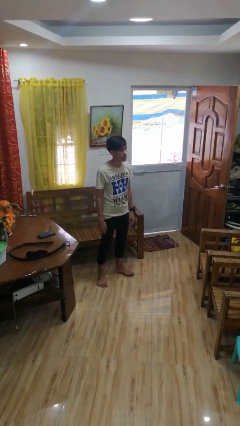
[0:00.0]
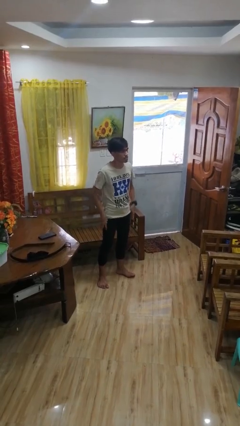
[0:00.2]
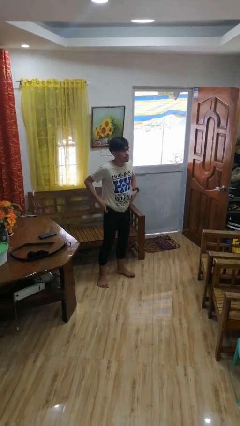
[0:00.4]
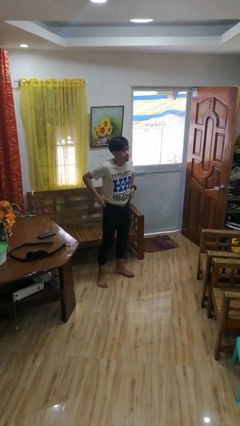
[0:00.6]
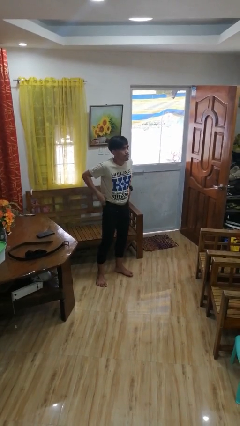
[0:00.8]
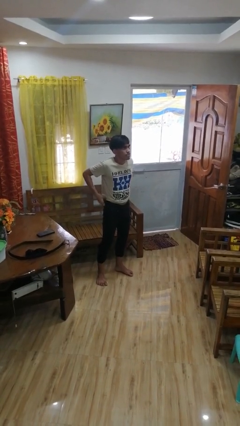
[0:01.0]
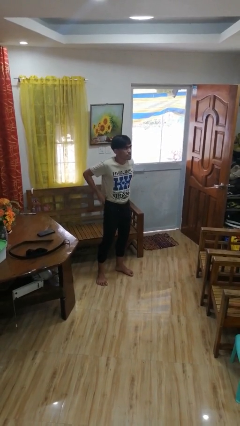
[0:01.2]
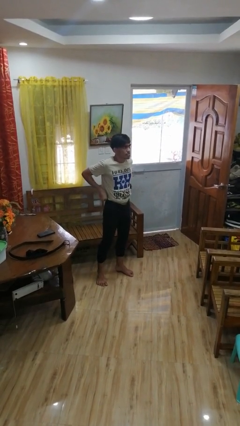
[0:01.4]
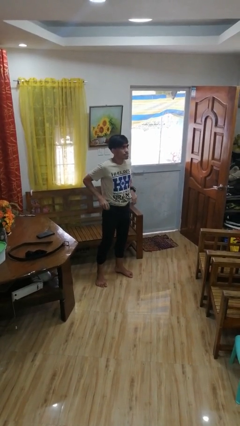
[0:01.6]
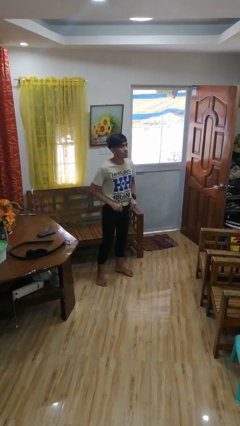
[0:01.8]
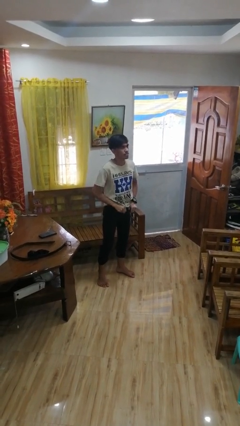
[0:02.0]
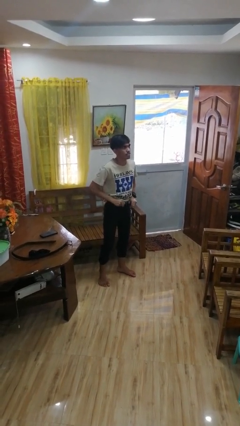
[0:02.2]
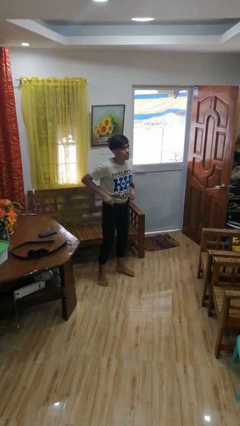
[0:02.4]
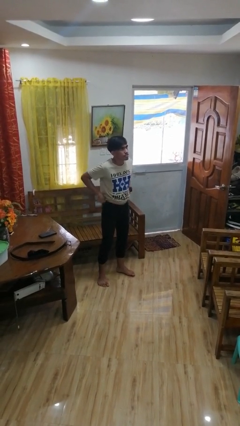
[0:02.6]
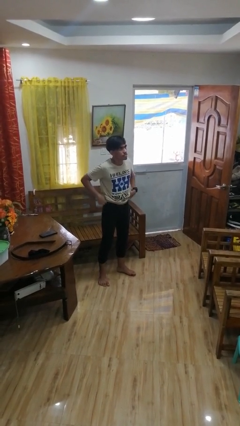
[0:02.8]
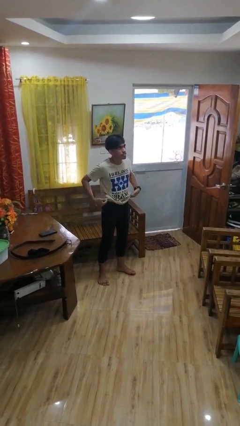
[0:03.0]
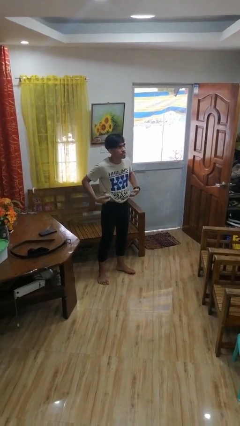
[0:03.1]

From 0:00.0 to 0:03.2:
person hikes up pants

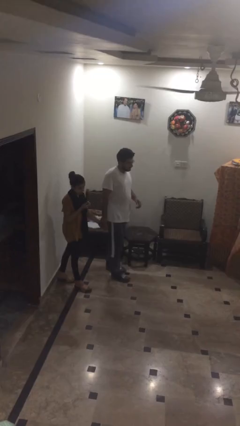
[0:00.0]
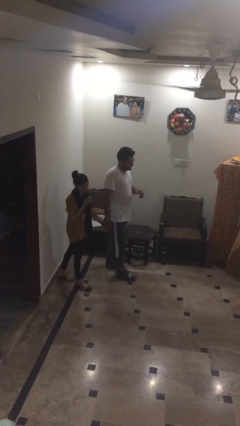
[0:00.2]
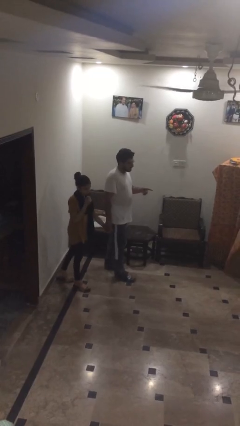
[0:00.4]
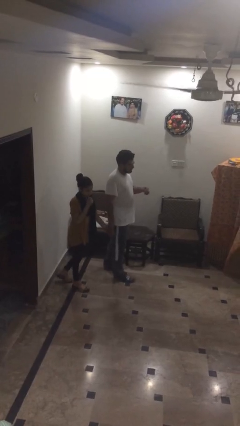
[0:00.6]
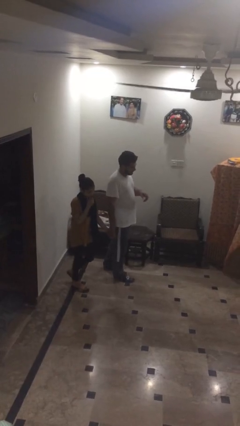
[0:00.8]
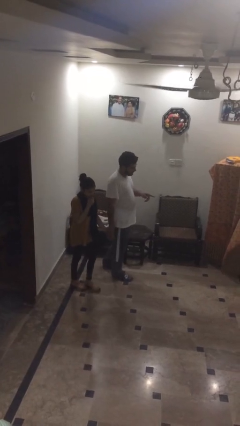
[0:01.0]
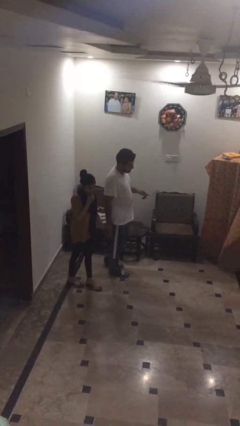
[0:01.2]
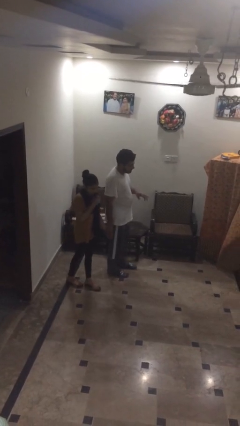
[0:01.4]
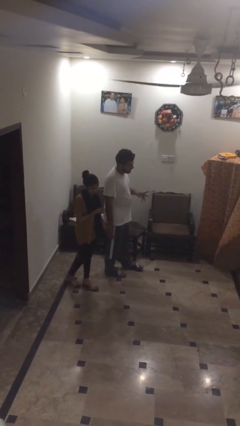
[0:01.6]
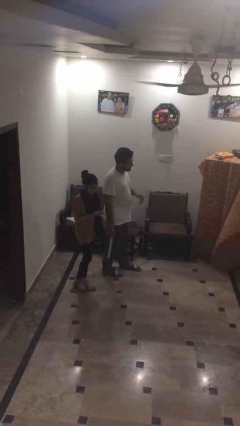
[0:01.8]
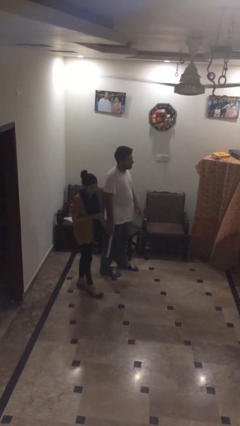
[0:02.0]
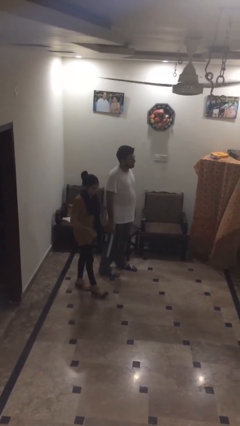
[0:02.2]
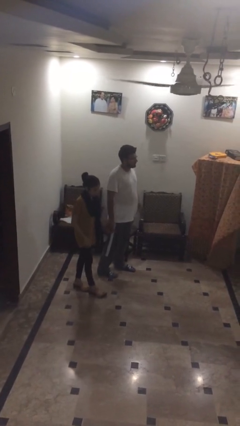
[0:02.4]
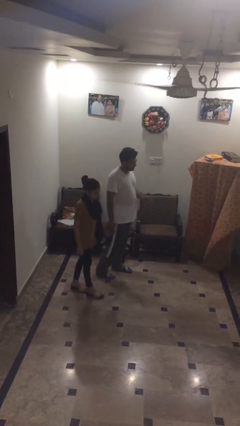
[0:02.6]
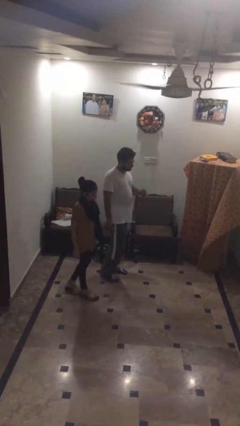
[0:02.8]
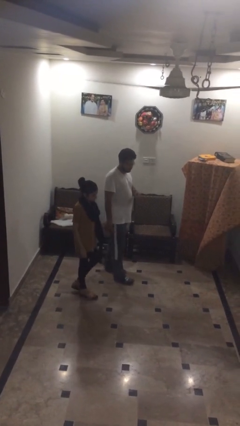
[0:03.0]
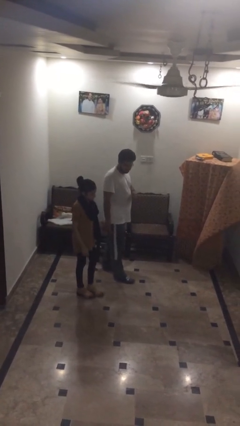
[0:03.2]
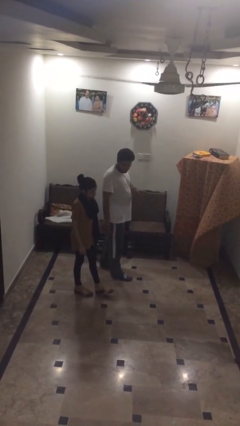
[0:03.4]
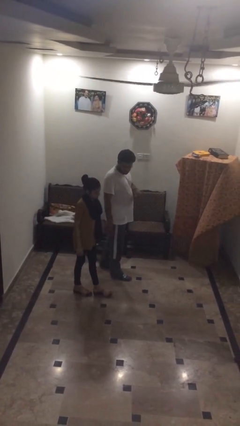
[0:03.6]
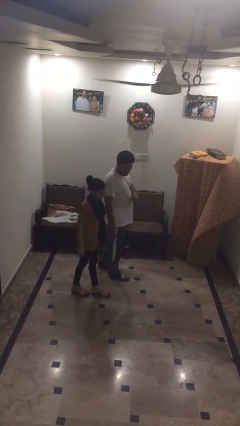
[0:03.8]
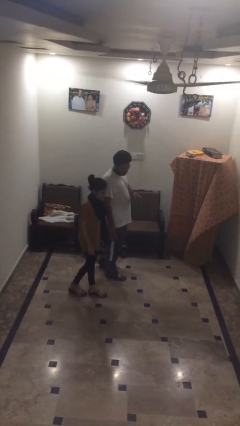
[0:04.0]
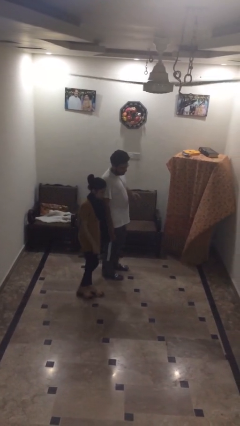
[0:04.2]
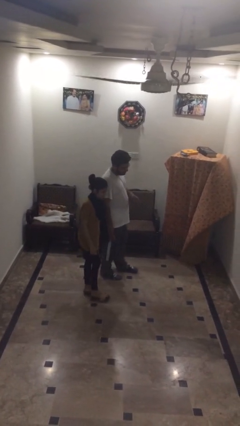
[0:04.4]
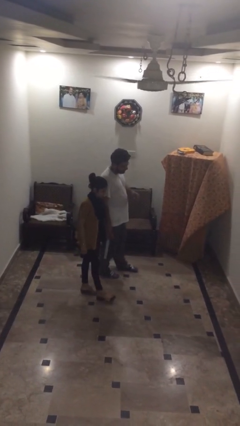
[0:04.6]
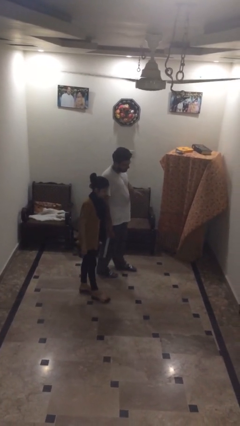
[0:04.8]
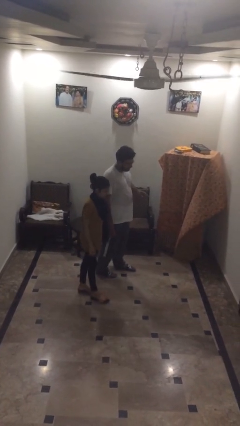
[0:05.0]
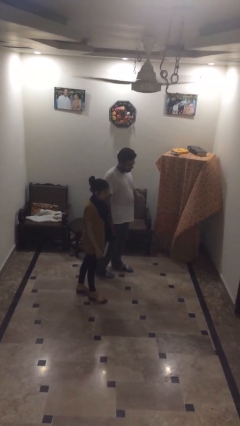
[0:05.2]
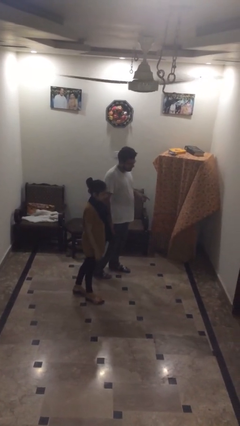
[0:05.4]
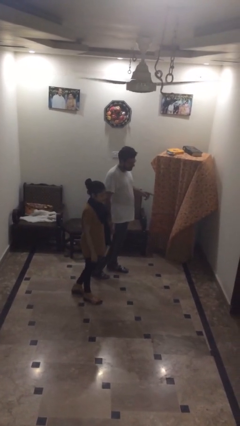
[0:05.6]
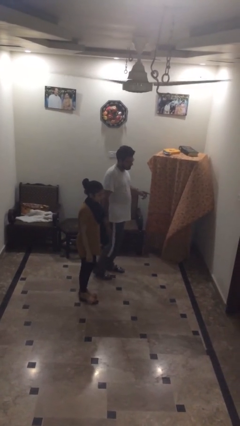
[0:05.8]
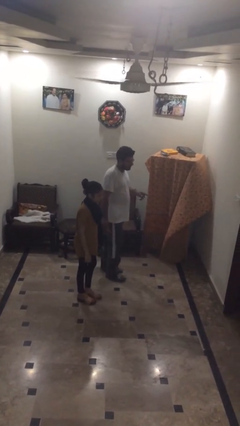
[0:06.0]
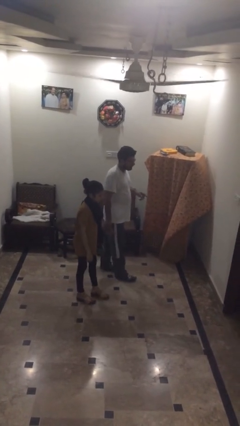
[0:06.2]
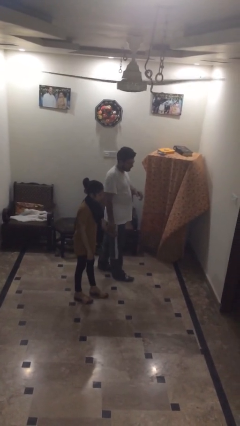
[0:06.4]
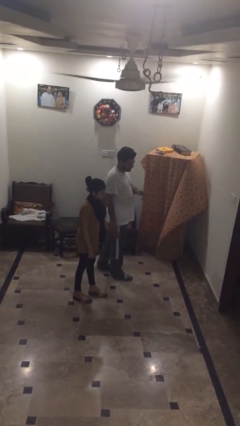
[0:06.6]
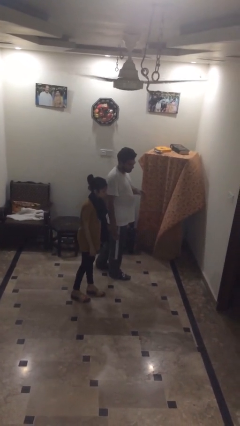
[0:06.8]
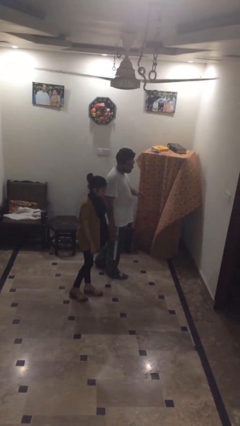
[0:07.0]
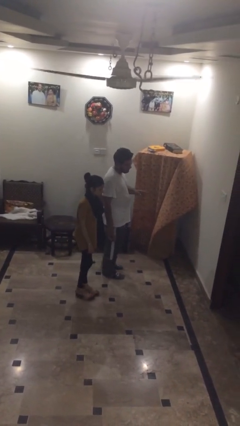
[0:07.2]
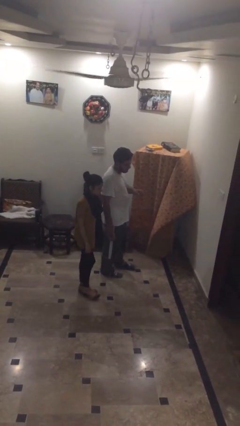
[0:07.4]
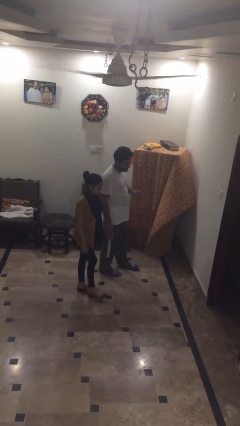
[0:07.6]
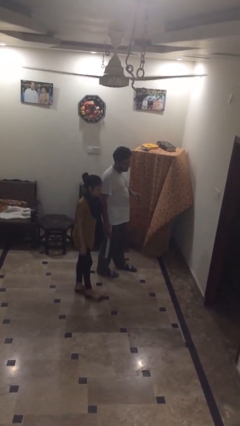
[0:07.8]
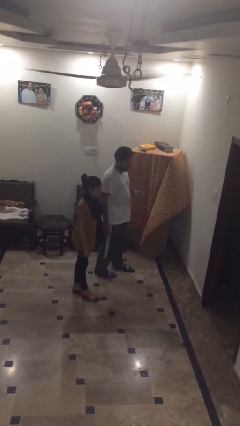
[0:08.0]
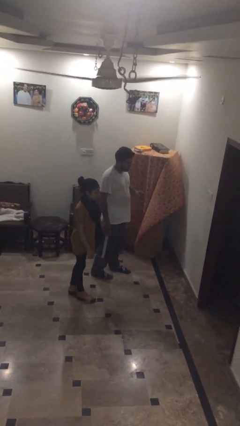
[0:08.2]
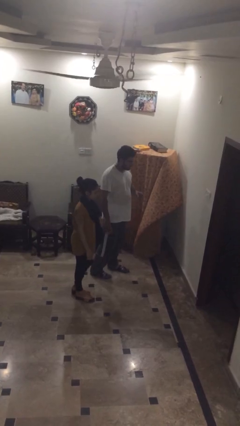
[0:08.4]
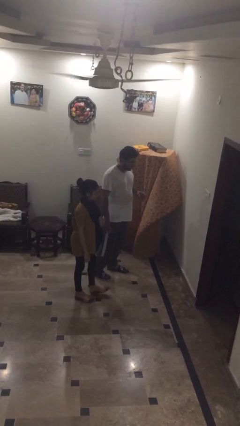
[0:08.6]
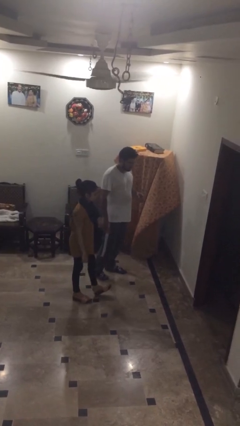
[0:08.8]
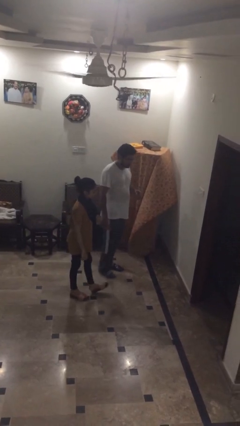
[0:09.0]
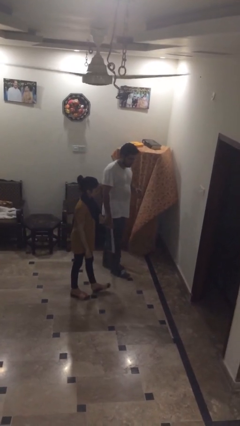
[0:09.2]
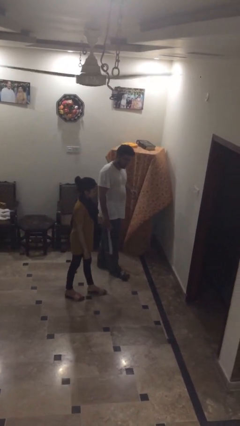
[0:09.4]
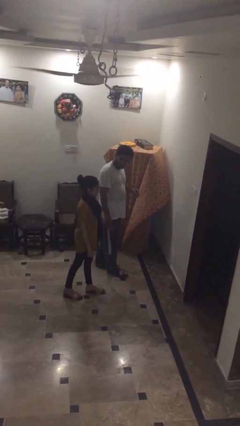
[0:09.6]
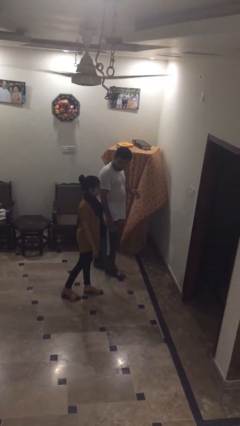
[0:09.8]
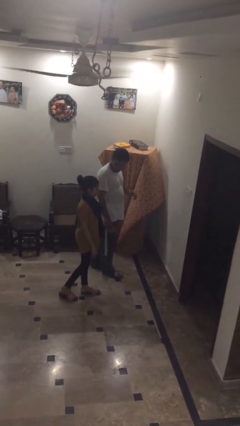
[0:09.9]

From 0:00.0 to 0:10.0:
person holds hand

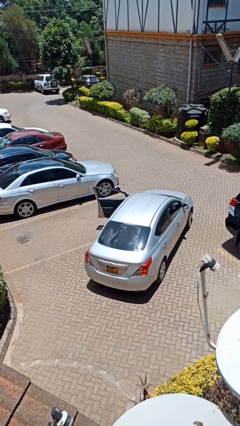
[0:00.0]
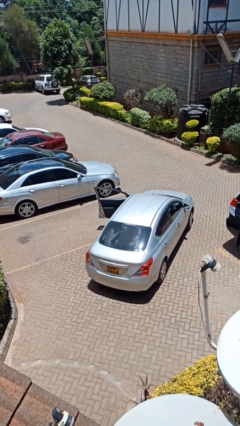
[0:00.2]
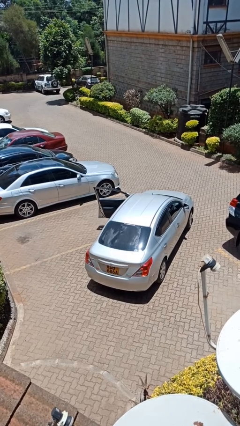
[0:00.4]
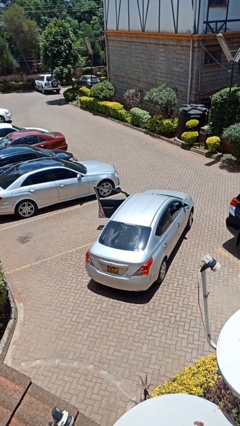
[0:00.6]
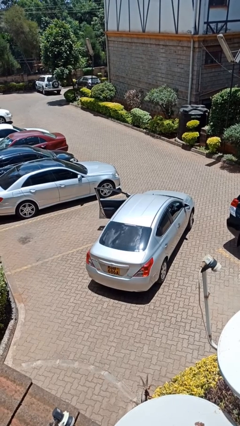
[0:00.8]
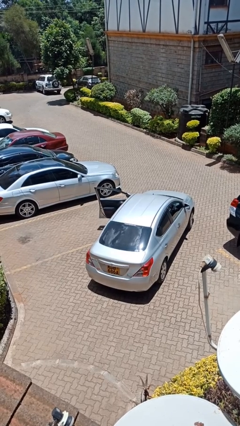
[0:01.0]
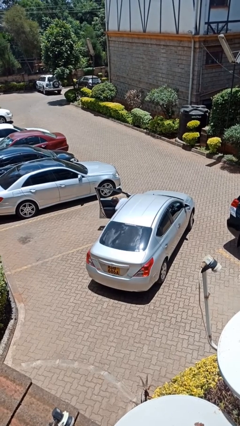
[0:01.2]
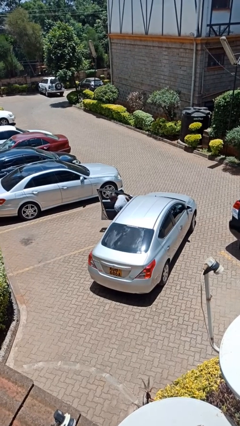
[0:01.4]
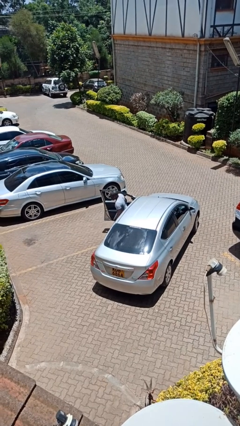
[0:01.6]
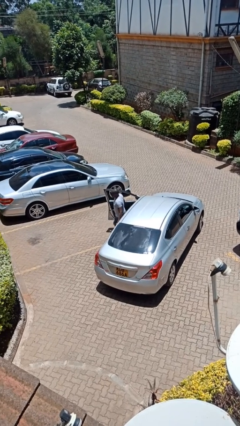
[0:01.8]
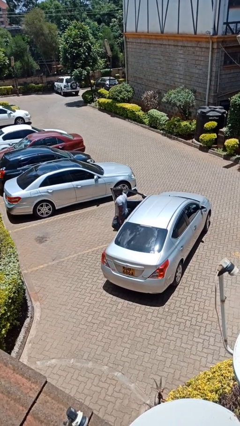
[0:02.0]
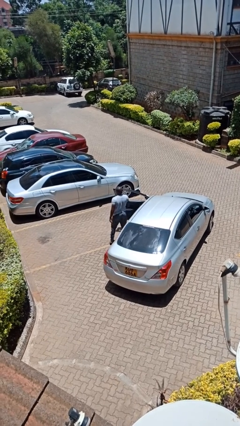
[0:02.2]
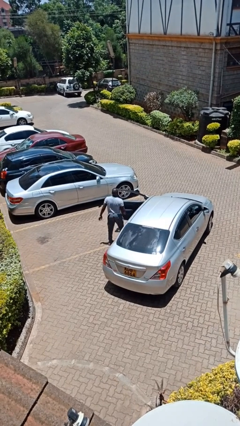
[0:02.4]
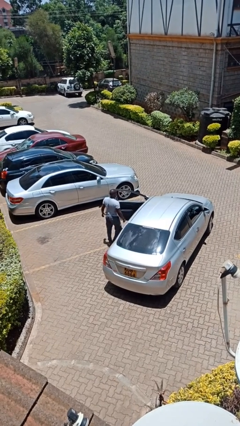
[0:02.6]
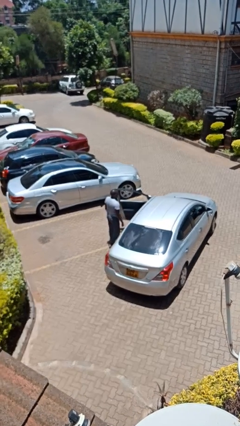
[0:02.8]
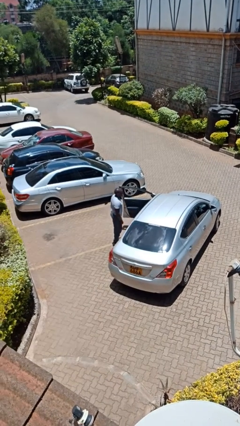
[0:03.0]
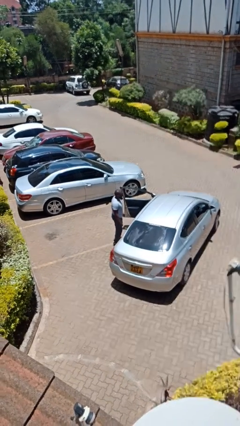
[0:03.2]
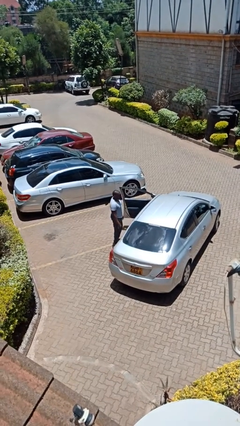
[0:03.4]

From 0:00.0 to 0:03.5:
person exits car

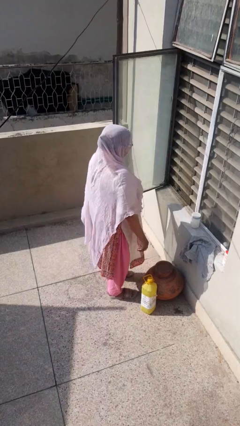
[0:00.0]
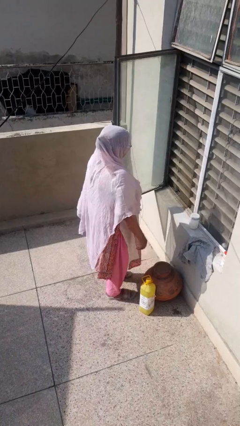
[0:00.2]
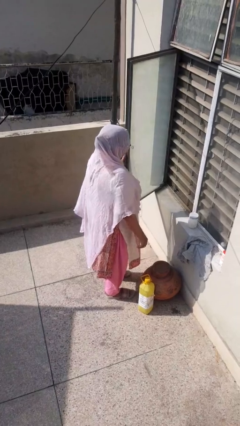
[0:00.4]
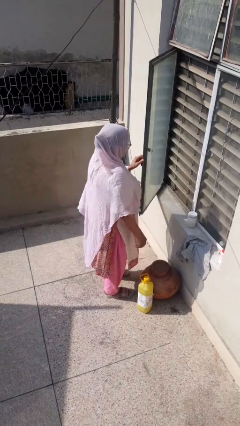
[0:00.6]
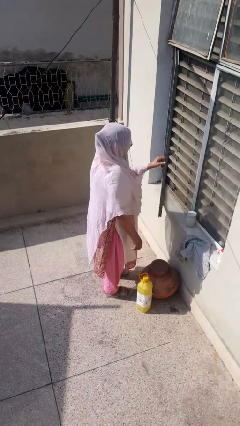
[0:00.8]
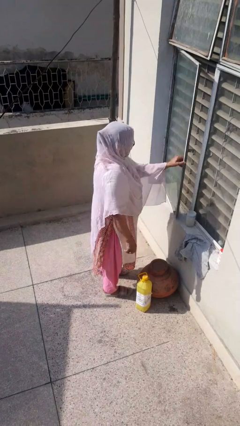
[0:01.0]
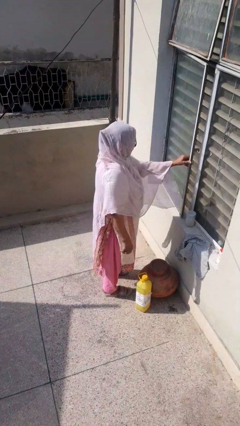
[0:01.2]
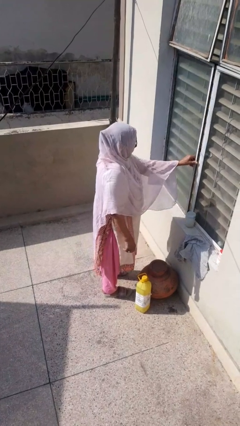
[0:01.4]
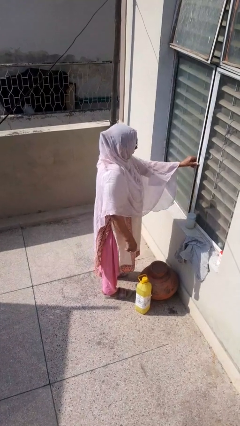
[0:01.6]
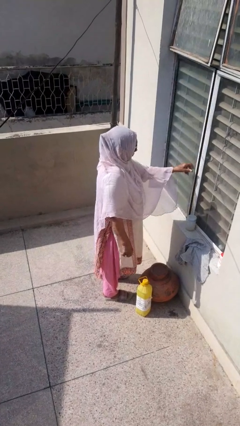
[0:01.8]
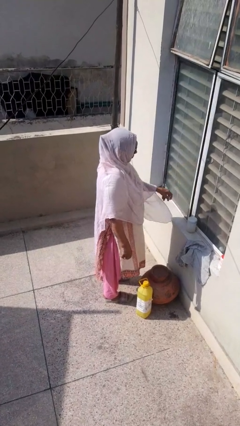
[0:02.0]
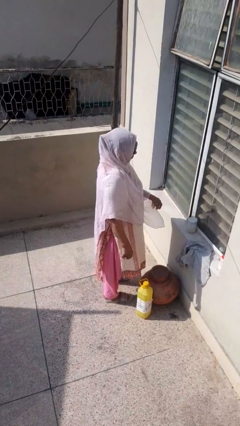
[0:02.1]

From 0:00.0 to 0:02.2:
person closes home window
